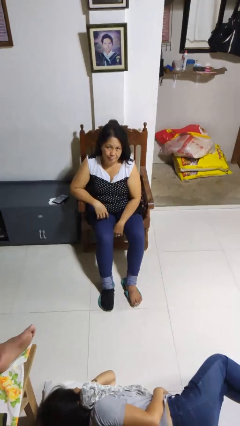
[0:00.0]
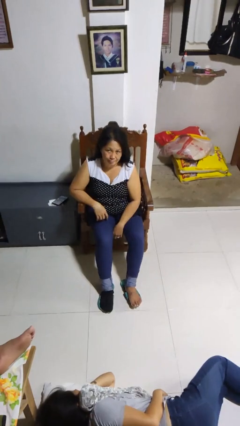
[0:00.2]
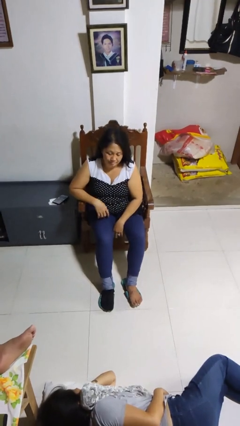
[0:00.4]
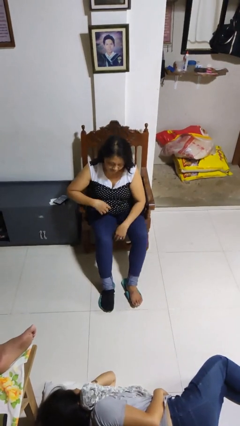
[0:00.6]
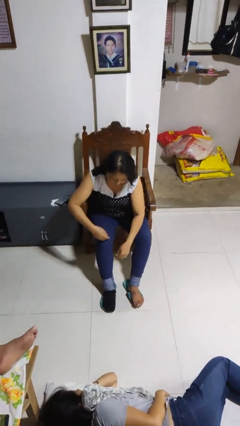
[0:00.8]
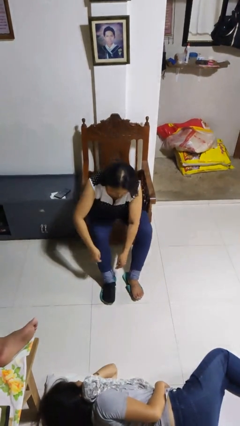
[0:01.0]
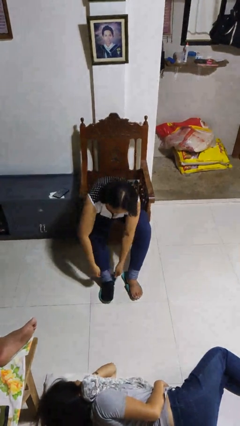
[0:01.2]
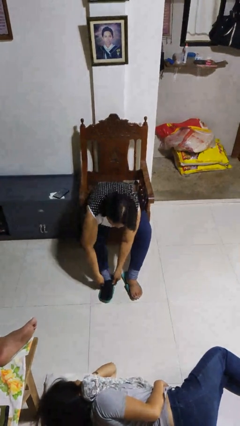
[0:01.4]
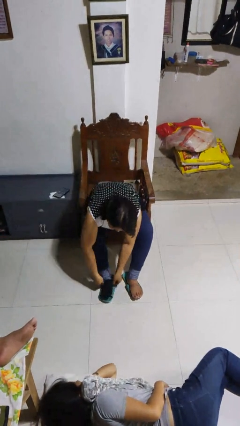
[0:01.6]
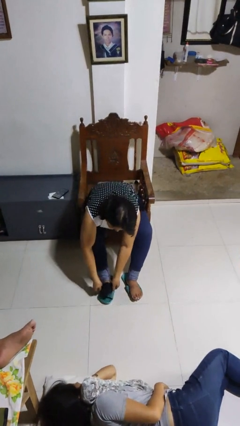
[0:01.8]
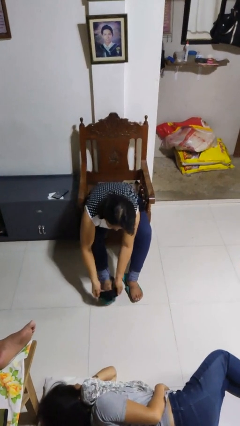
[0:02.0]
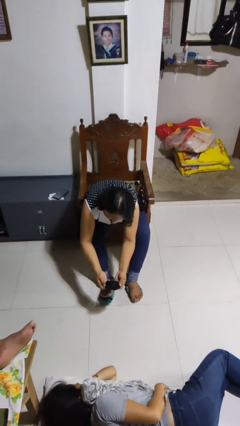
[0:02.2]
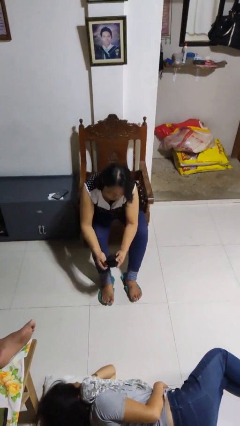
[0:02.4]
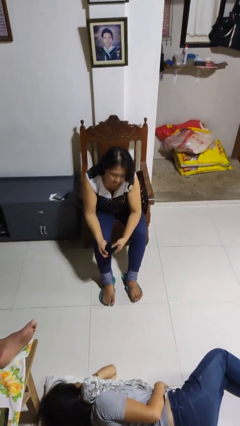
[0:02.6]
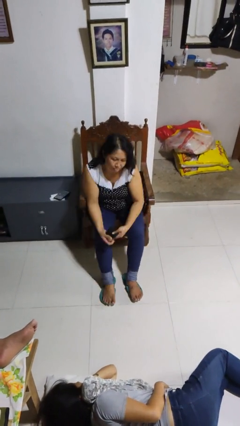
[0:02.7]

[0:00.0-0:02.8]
person takes off socks

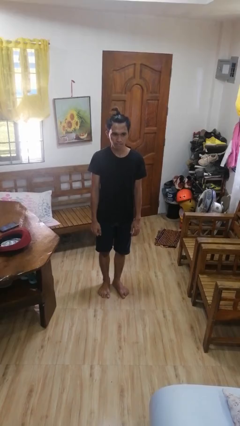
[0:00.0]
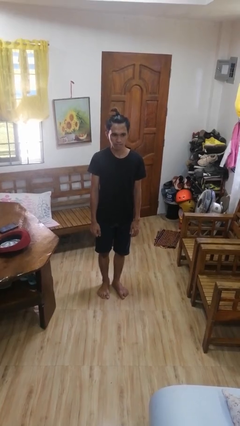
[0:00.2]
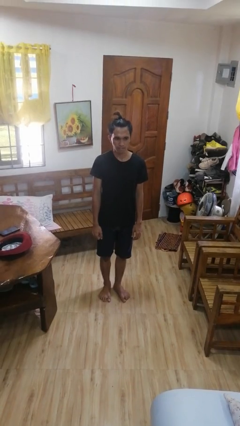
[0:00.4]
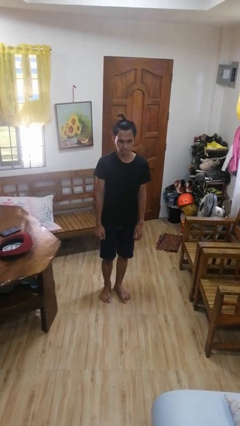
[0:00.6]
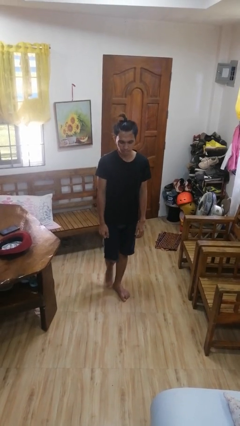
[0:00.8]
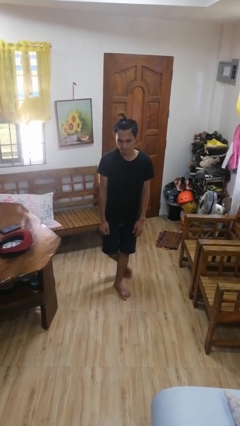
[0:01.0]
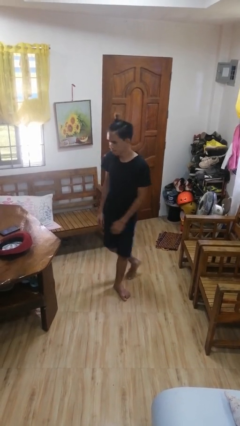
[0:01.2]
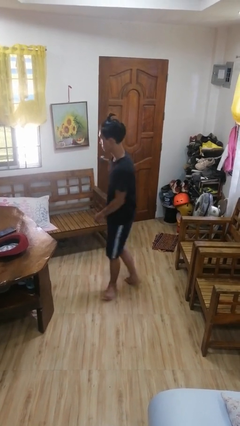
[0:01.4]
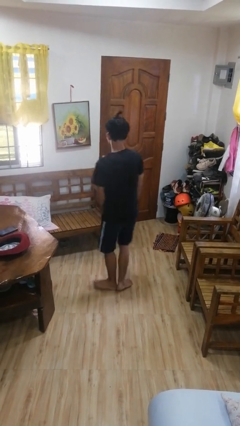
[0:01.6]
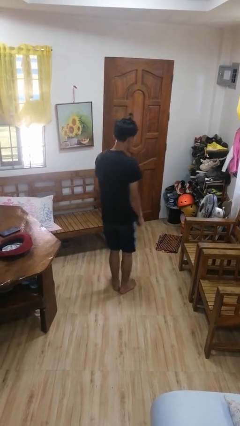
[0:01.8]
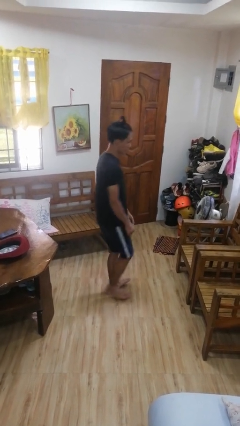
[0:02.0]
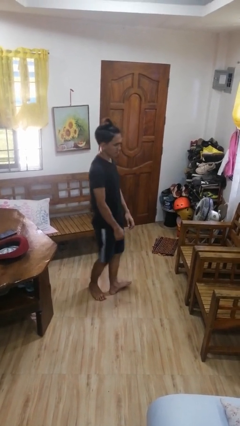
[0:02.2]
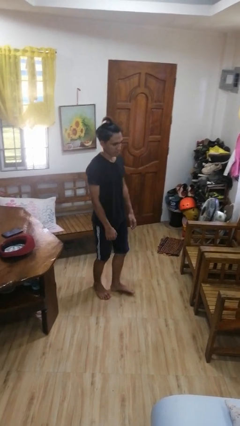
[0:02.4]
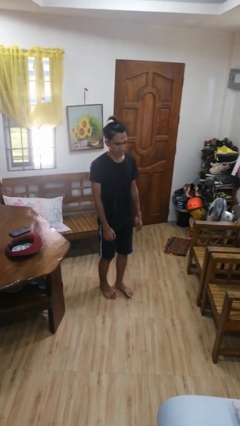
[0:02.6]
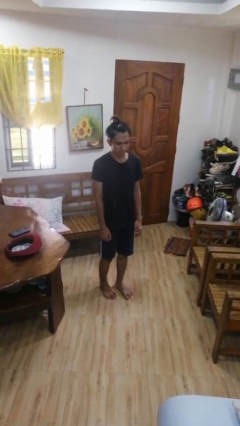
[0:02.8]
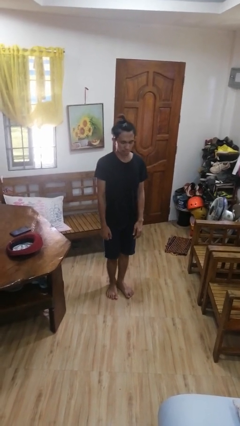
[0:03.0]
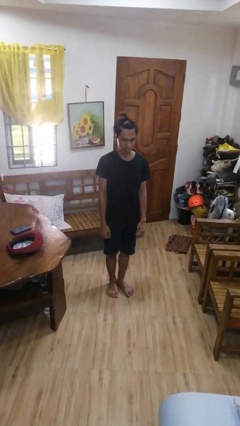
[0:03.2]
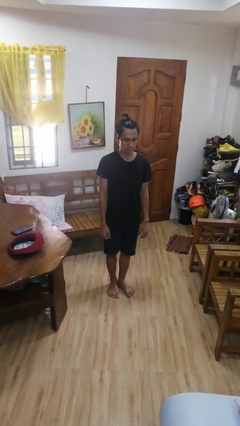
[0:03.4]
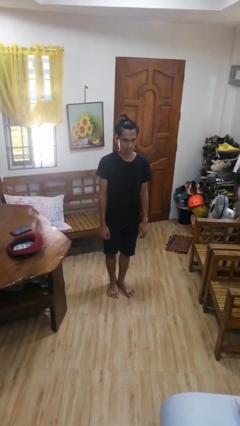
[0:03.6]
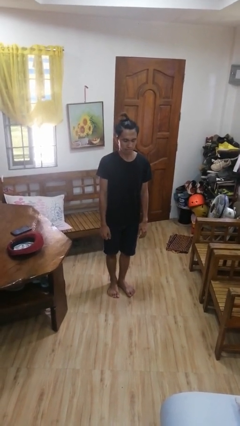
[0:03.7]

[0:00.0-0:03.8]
person twirls

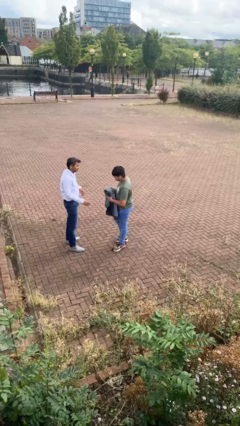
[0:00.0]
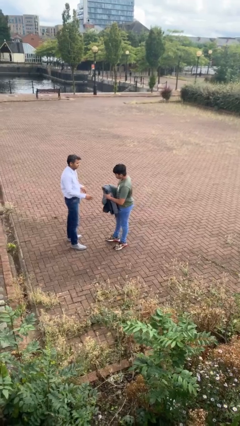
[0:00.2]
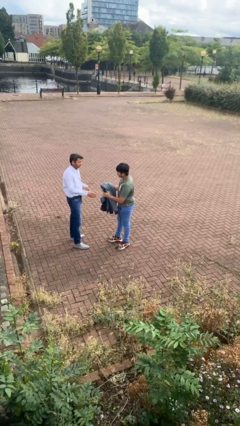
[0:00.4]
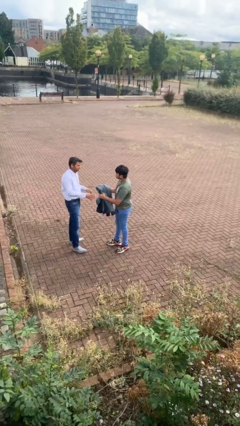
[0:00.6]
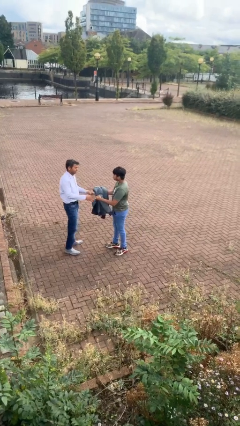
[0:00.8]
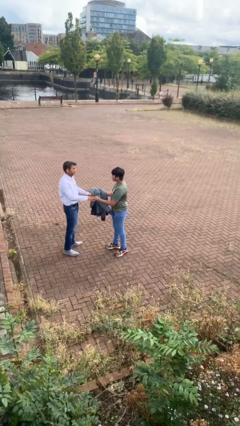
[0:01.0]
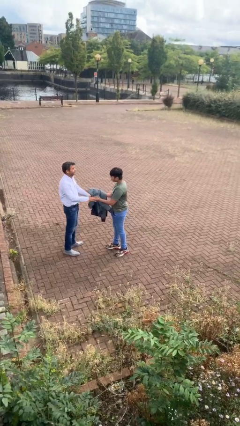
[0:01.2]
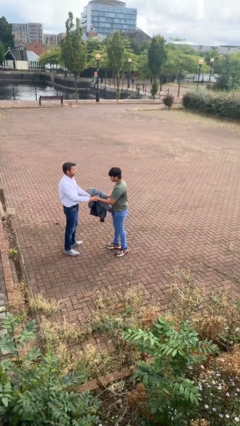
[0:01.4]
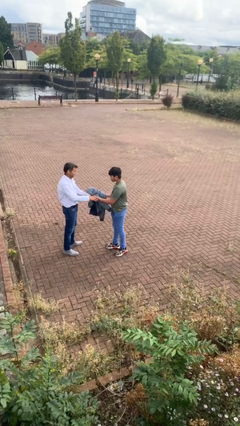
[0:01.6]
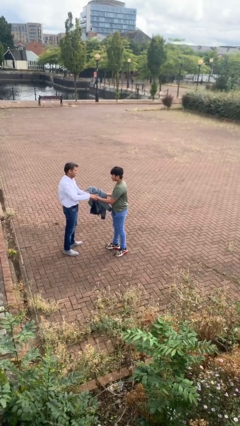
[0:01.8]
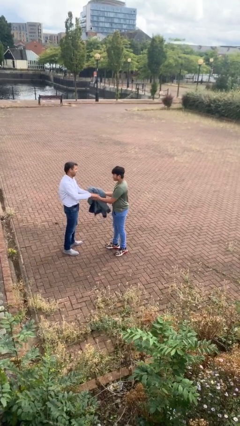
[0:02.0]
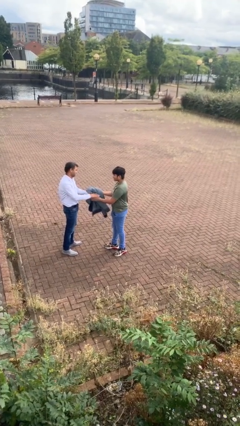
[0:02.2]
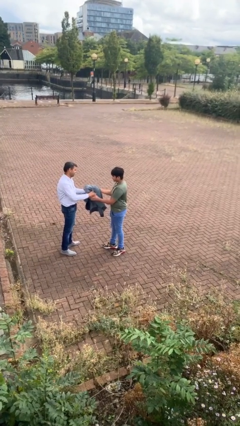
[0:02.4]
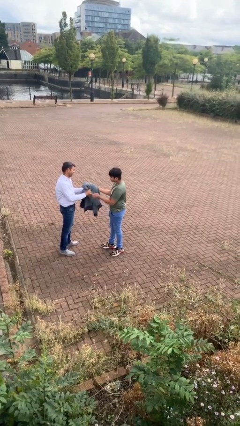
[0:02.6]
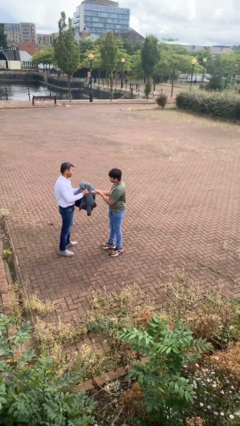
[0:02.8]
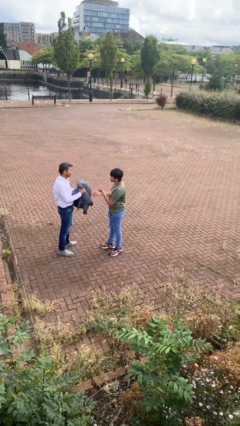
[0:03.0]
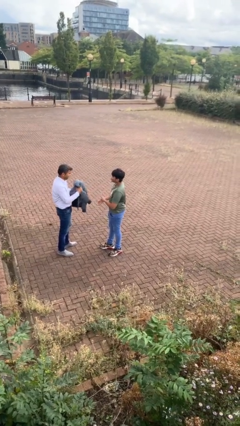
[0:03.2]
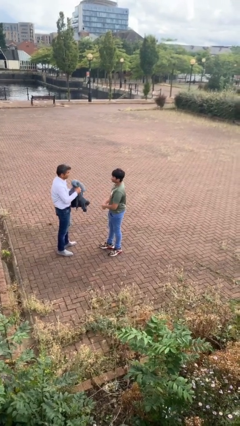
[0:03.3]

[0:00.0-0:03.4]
person transfers object to person

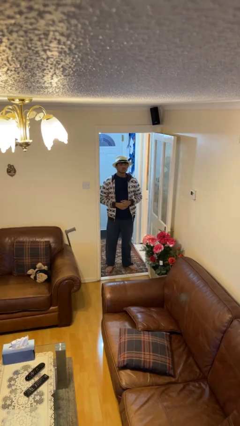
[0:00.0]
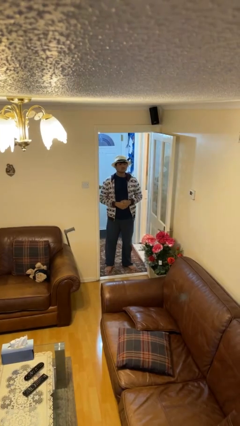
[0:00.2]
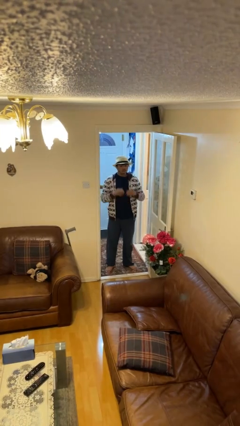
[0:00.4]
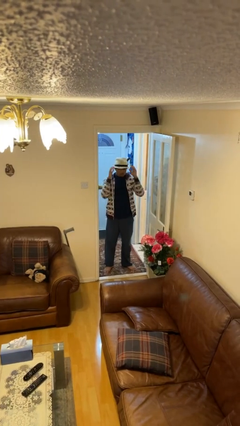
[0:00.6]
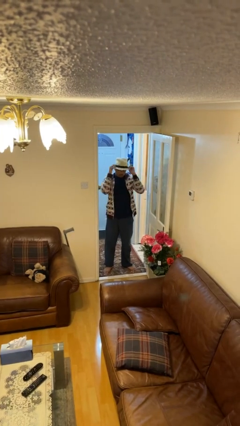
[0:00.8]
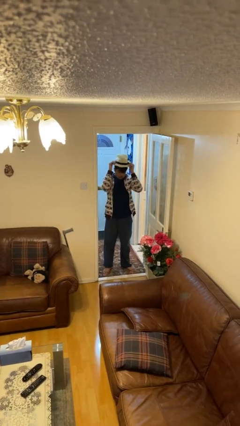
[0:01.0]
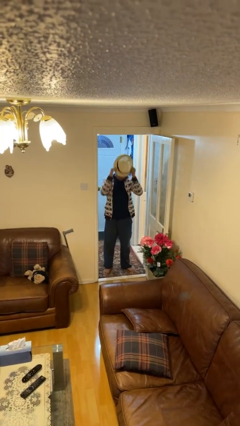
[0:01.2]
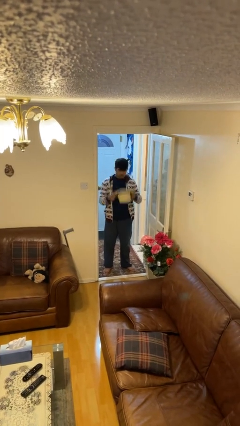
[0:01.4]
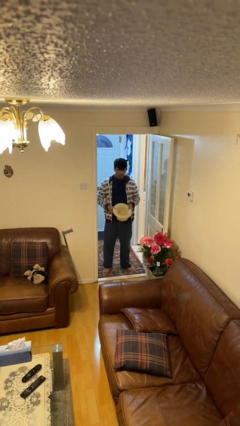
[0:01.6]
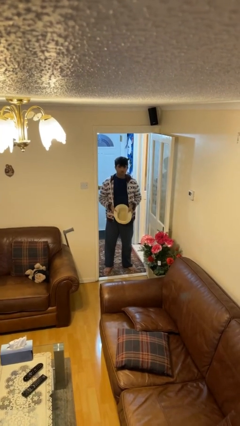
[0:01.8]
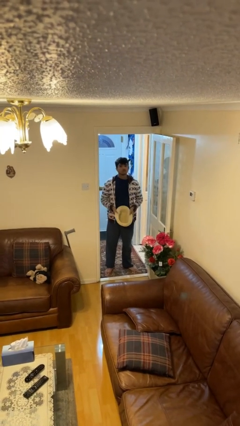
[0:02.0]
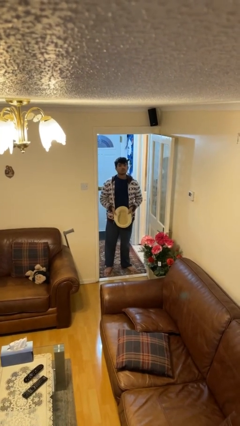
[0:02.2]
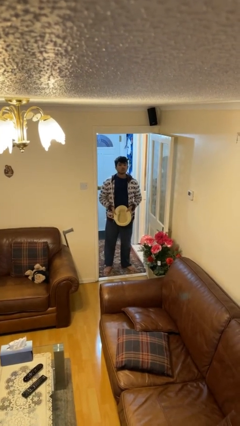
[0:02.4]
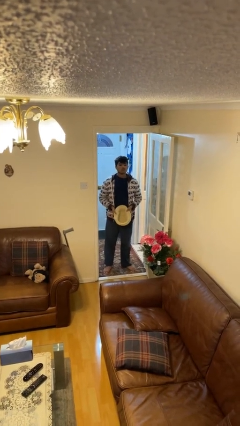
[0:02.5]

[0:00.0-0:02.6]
person takes off hat

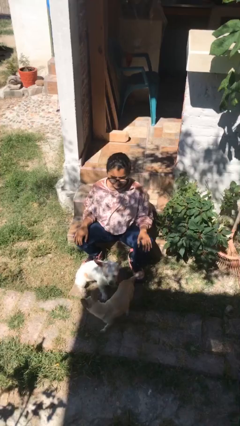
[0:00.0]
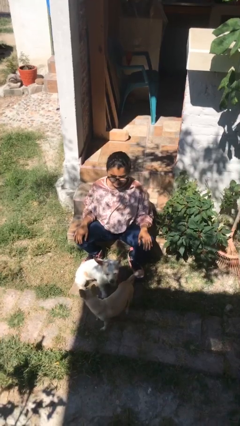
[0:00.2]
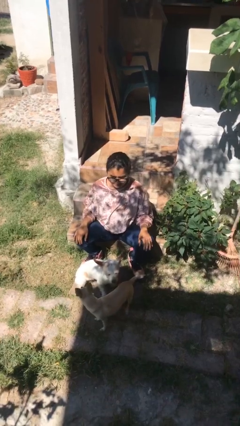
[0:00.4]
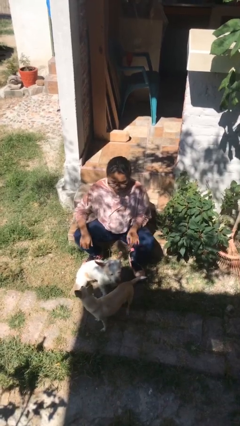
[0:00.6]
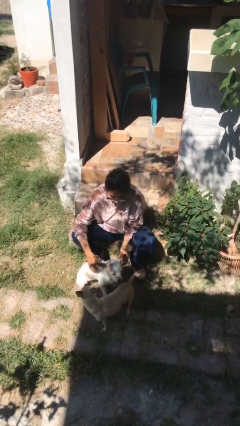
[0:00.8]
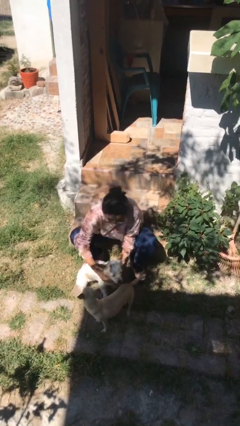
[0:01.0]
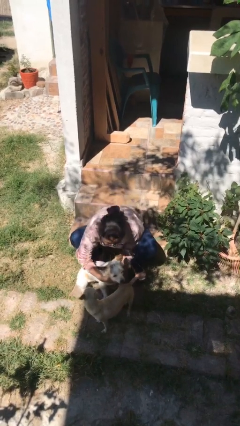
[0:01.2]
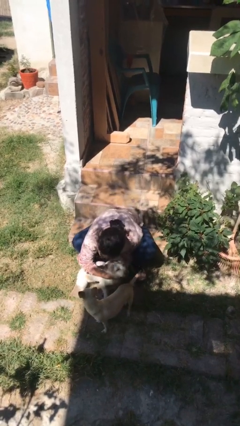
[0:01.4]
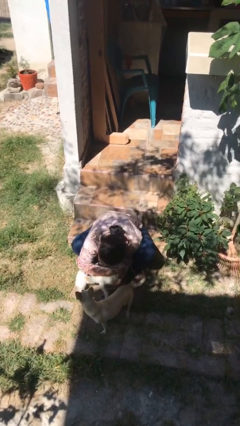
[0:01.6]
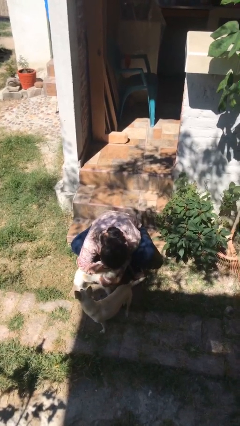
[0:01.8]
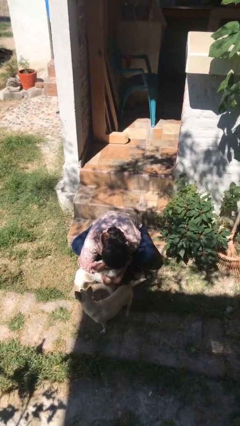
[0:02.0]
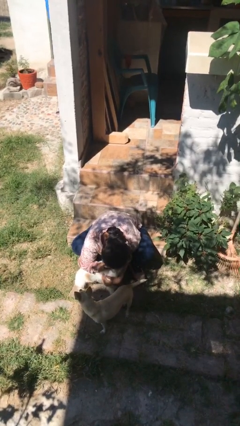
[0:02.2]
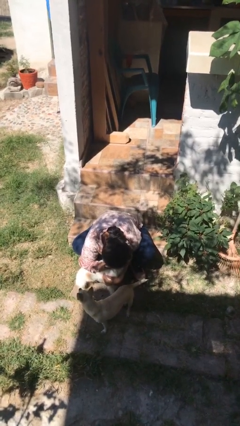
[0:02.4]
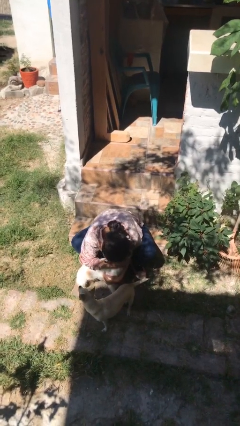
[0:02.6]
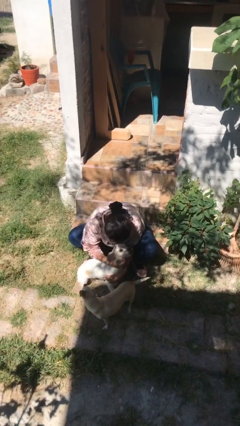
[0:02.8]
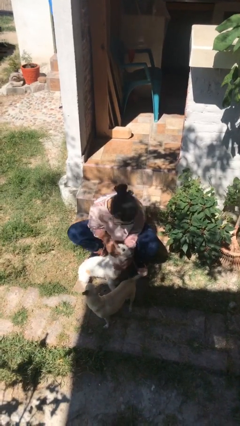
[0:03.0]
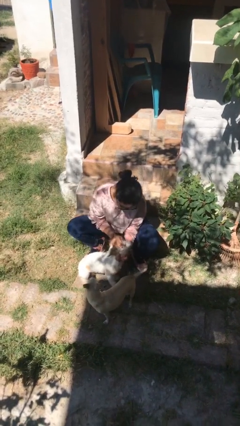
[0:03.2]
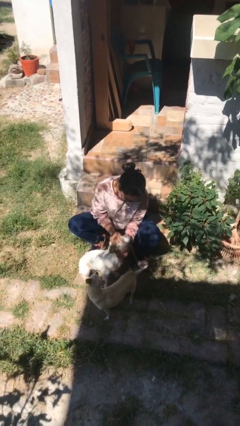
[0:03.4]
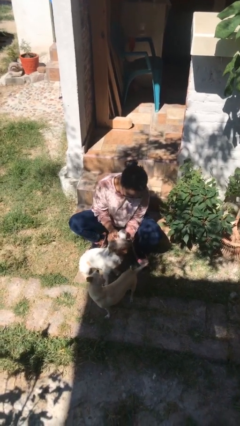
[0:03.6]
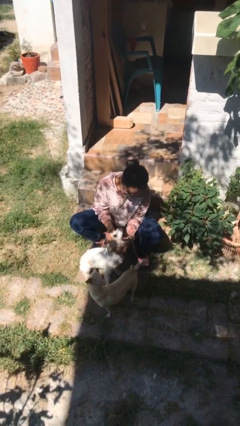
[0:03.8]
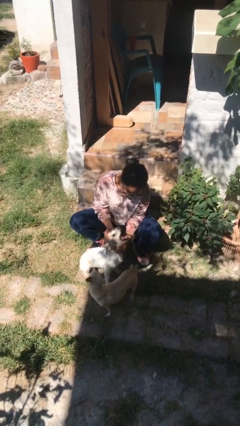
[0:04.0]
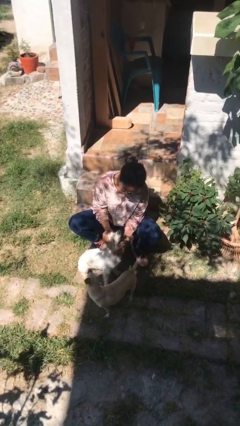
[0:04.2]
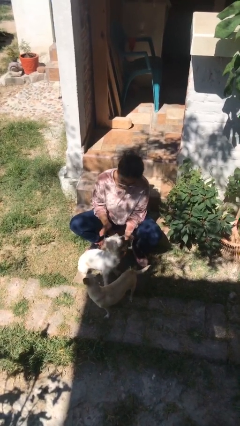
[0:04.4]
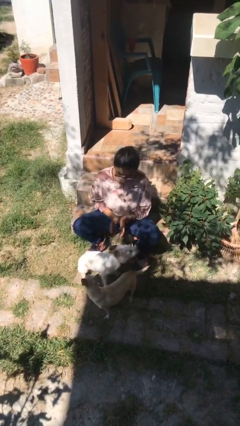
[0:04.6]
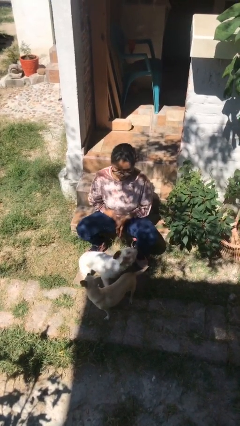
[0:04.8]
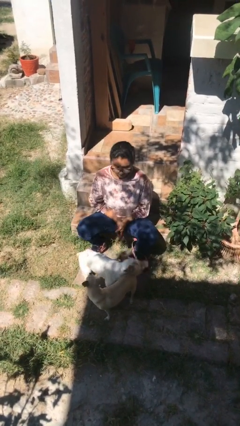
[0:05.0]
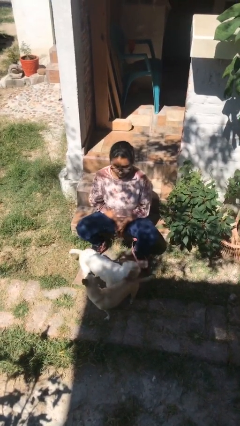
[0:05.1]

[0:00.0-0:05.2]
person hugs dog
